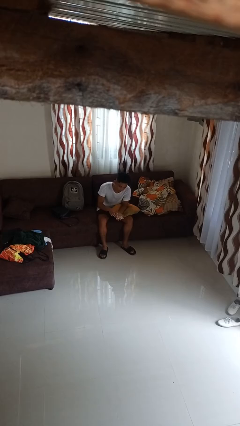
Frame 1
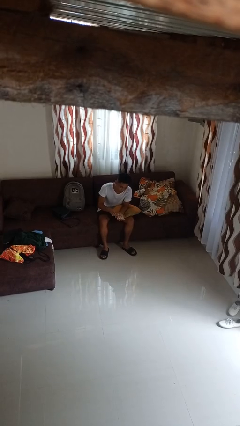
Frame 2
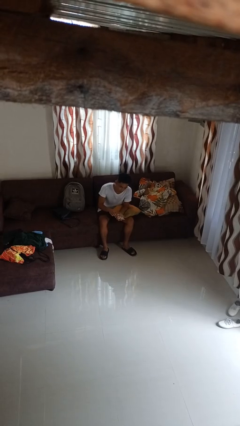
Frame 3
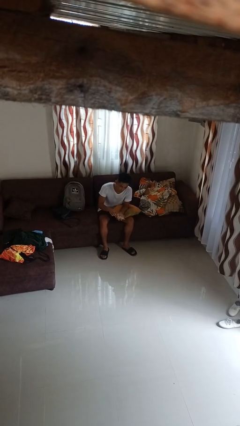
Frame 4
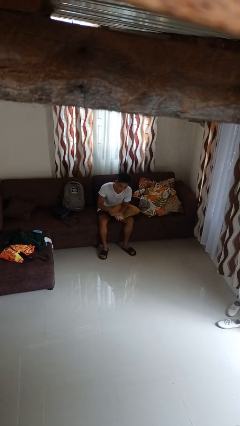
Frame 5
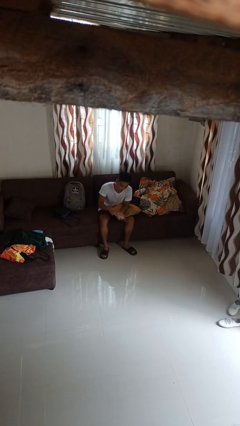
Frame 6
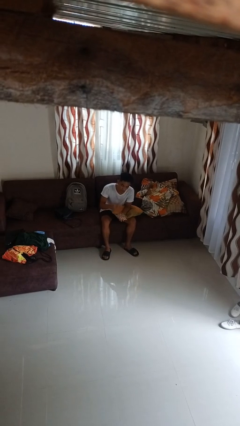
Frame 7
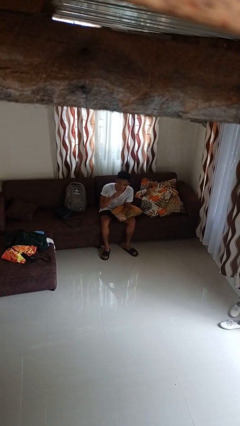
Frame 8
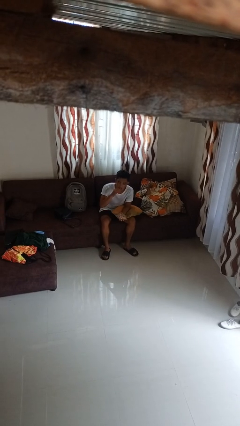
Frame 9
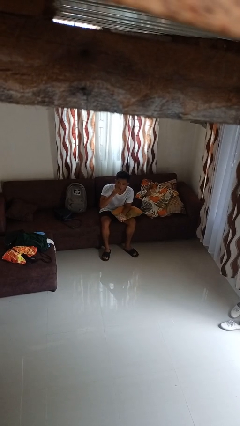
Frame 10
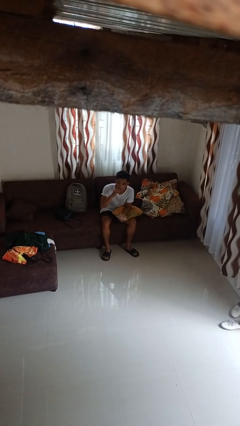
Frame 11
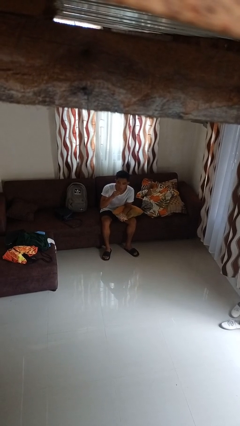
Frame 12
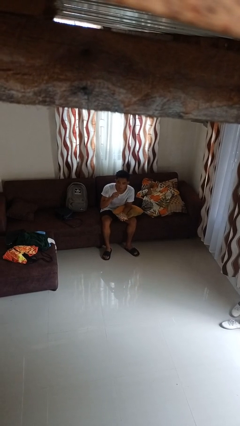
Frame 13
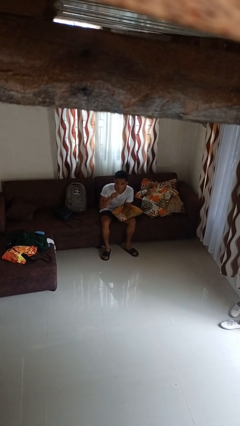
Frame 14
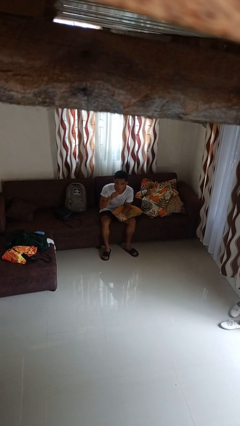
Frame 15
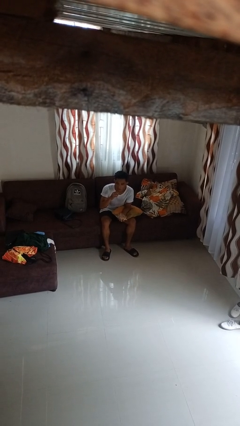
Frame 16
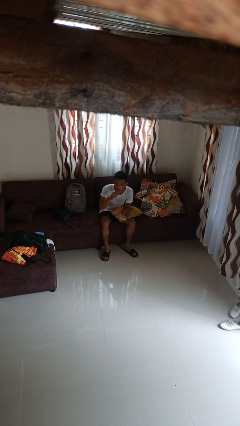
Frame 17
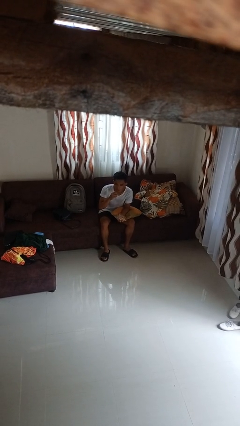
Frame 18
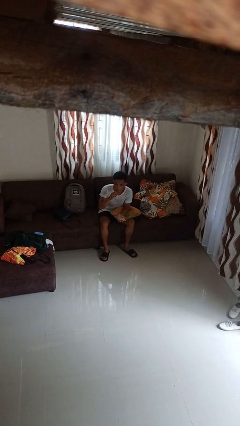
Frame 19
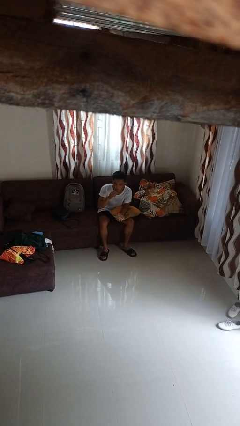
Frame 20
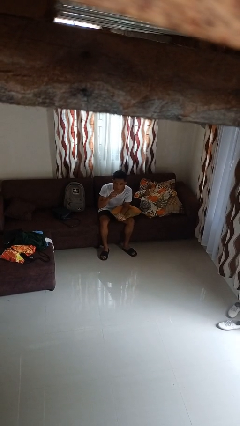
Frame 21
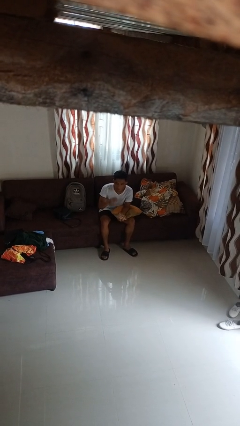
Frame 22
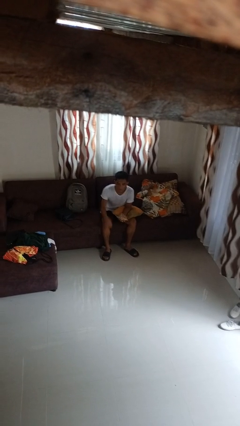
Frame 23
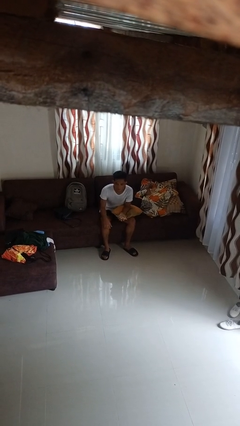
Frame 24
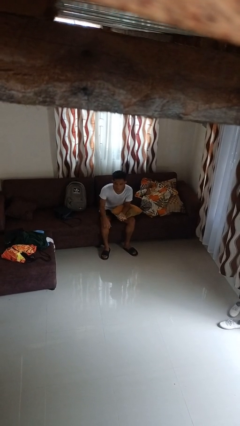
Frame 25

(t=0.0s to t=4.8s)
person eats snack from bag

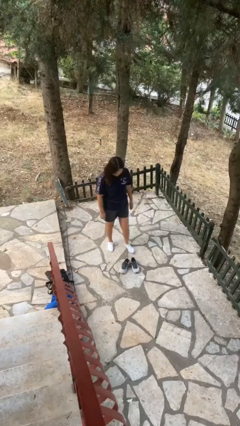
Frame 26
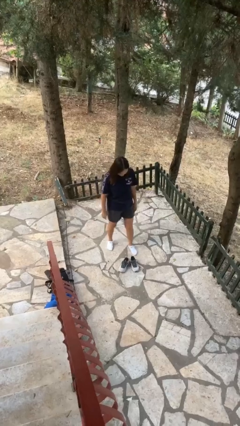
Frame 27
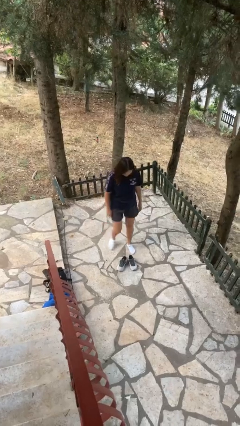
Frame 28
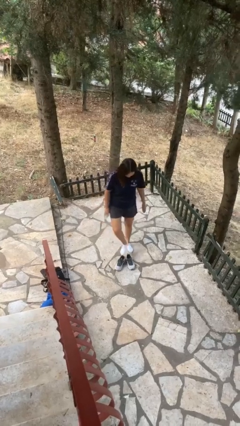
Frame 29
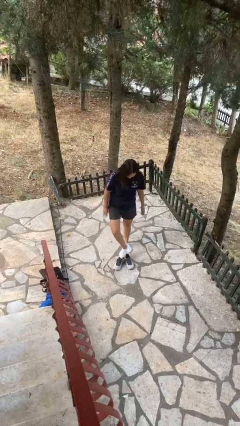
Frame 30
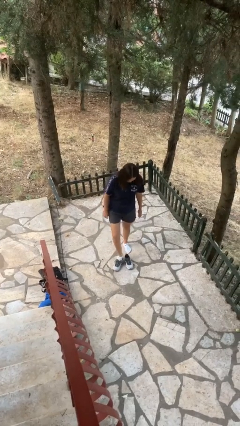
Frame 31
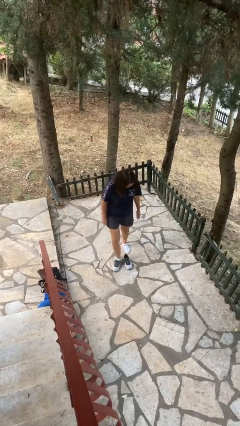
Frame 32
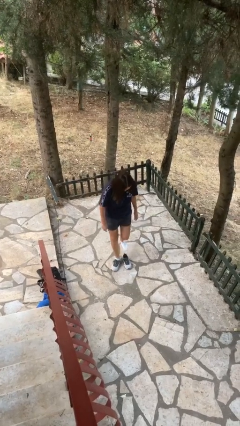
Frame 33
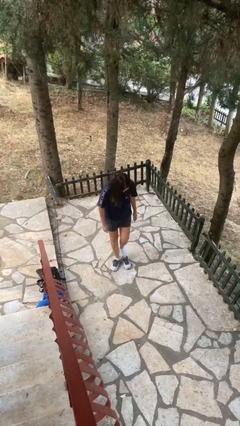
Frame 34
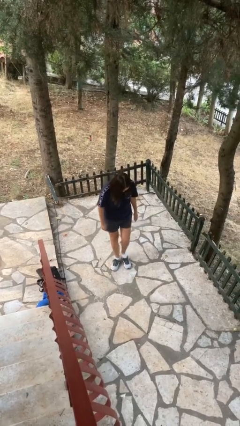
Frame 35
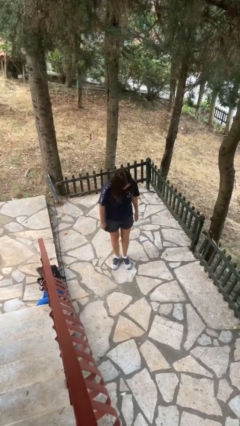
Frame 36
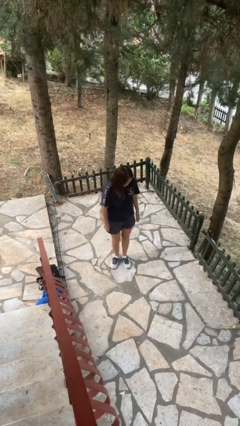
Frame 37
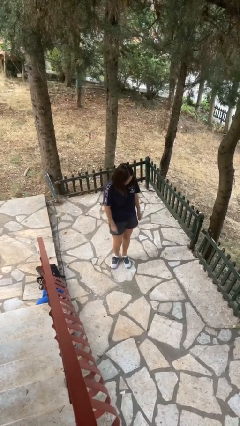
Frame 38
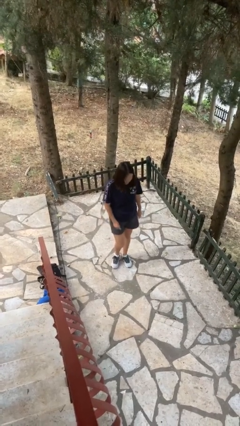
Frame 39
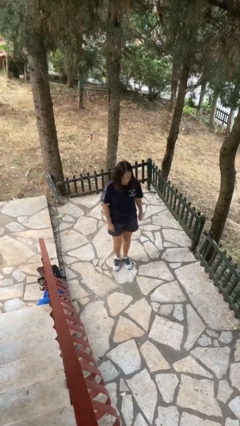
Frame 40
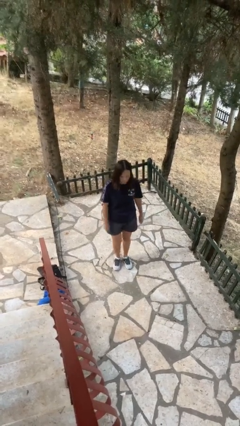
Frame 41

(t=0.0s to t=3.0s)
person puts on shoes

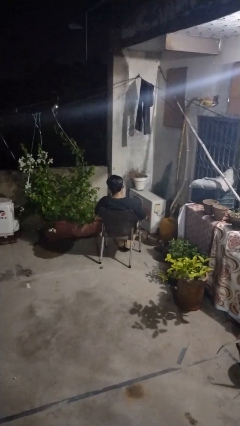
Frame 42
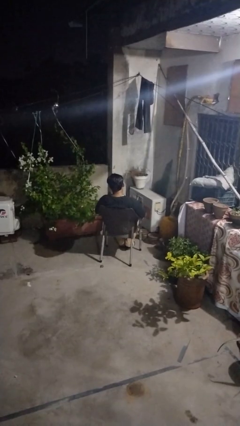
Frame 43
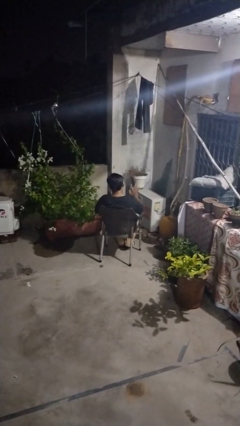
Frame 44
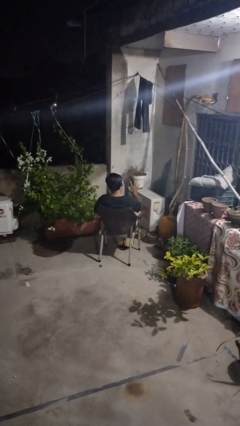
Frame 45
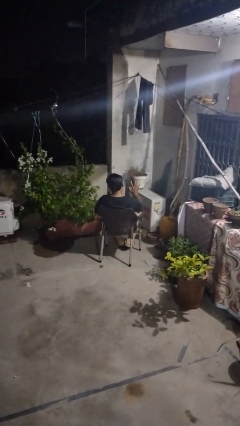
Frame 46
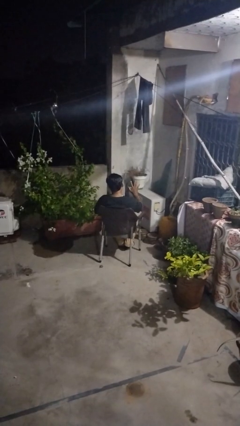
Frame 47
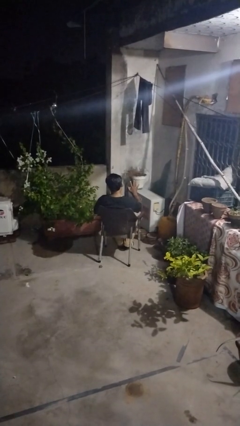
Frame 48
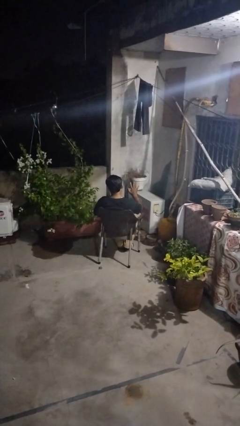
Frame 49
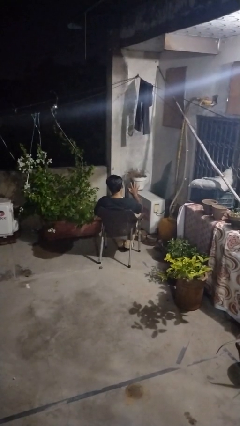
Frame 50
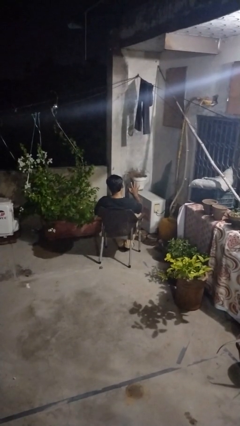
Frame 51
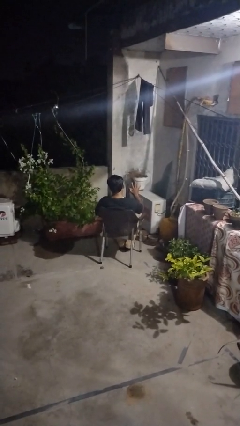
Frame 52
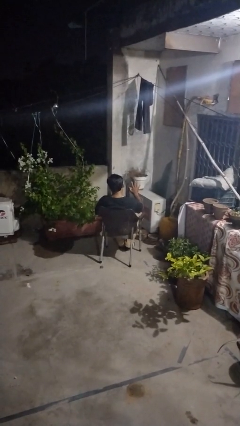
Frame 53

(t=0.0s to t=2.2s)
person gestures number five

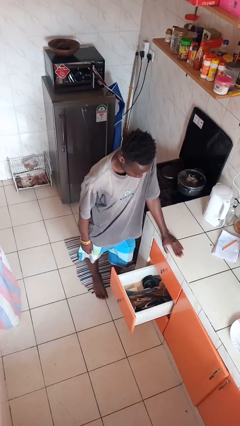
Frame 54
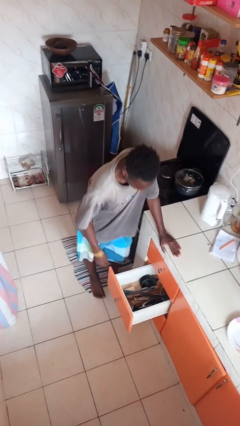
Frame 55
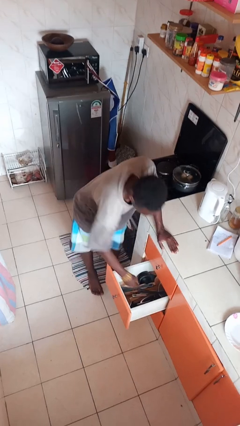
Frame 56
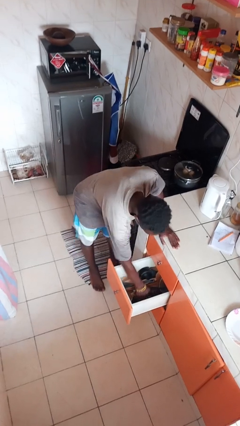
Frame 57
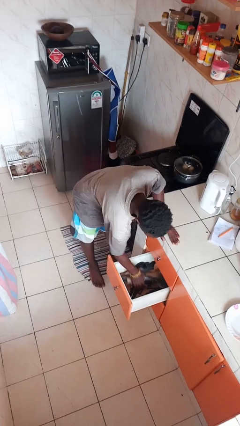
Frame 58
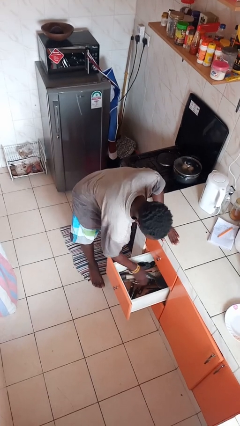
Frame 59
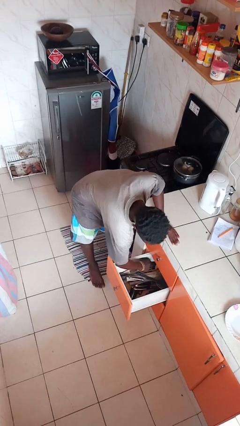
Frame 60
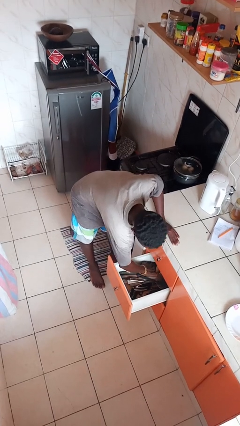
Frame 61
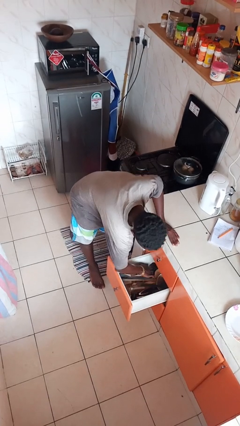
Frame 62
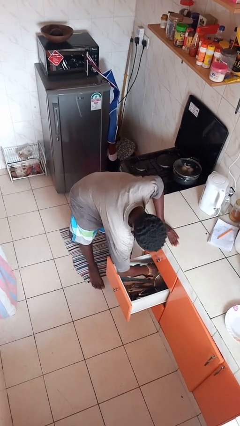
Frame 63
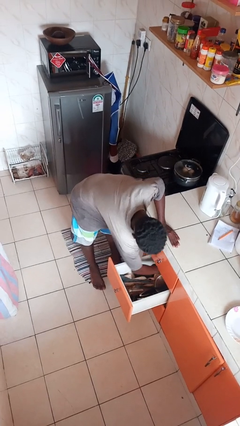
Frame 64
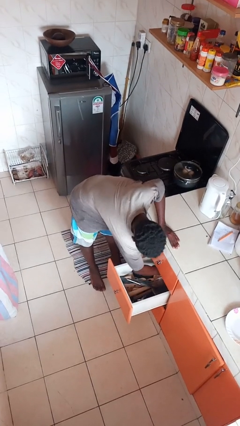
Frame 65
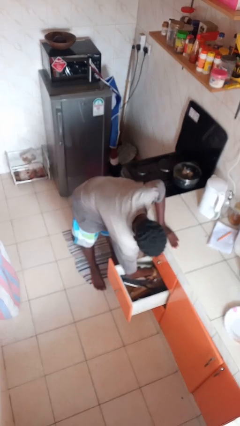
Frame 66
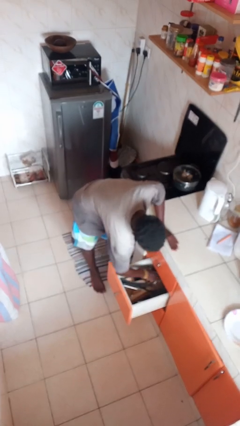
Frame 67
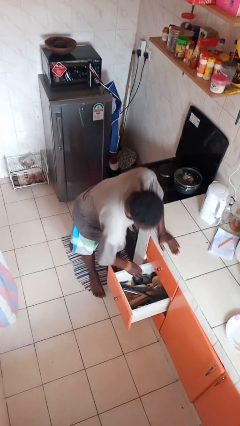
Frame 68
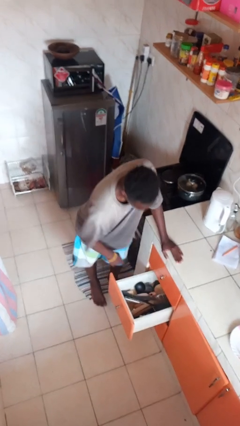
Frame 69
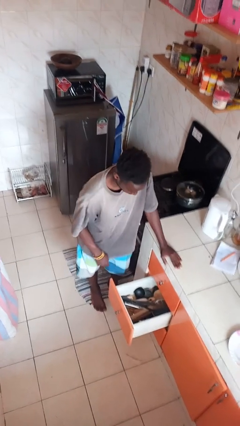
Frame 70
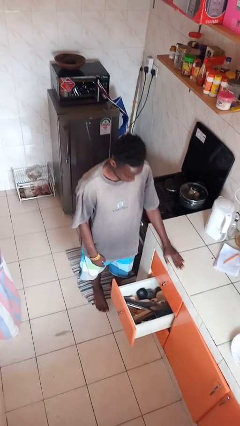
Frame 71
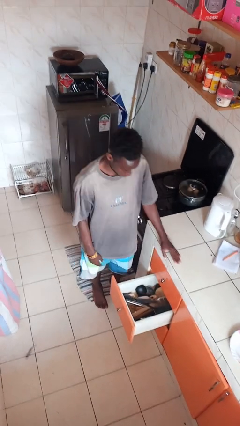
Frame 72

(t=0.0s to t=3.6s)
person searches in kitchen drawer

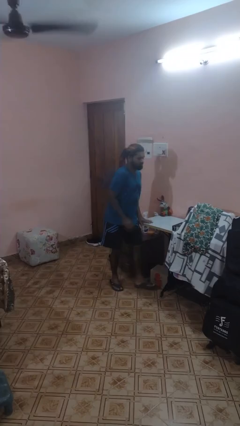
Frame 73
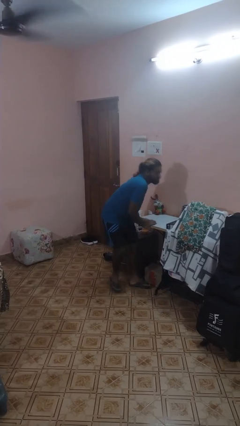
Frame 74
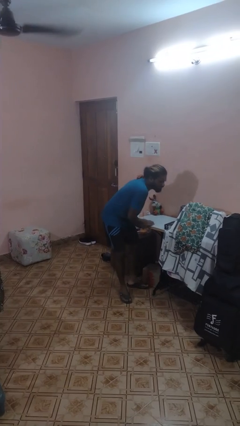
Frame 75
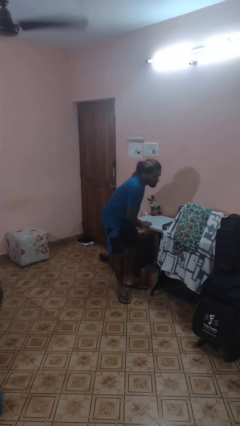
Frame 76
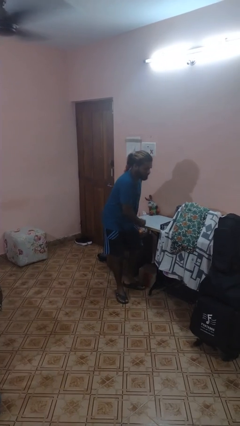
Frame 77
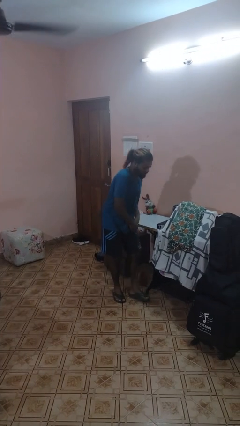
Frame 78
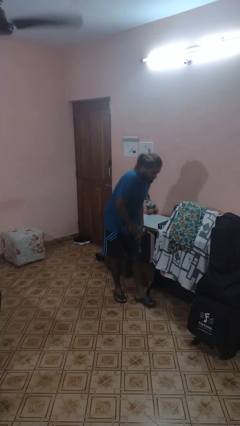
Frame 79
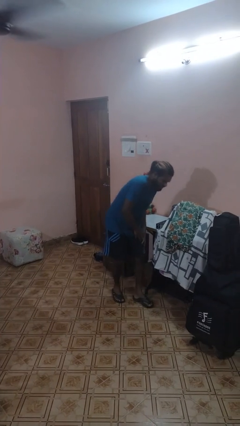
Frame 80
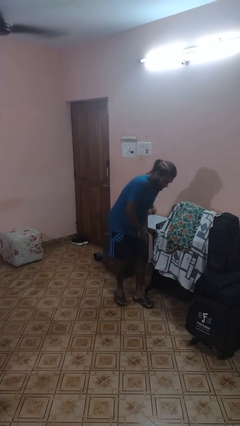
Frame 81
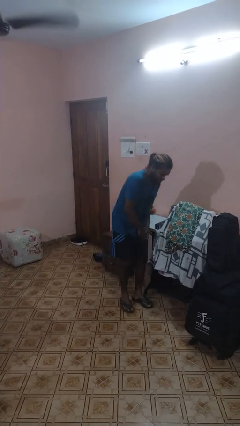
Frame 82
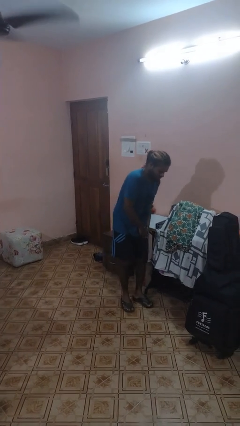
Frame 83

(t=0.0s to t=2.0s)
person bumps into table

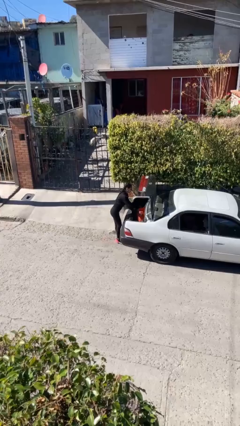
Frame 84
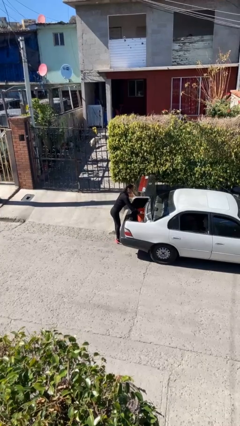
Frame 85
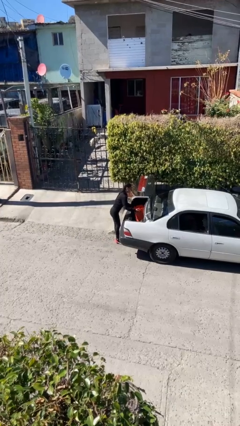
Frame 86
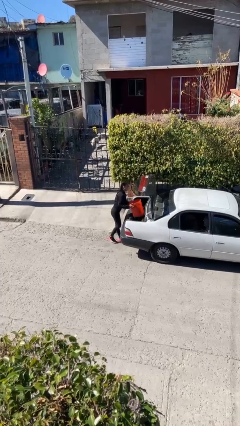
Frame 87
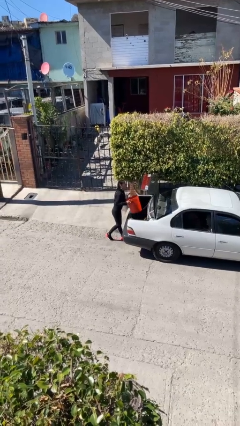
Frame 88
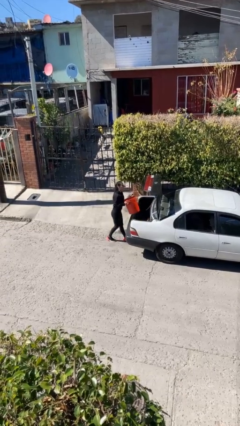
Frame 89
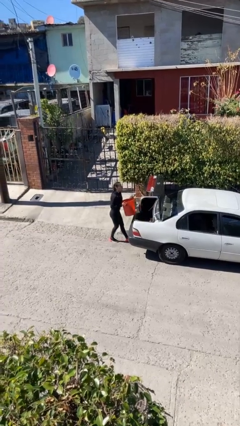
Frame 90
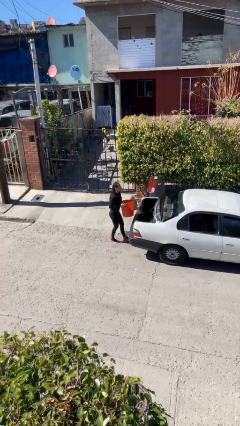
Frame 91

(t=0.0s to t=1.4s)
person unloads car

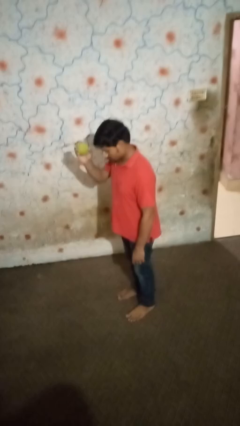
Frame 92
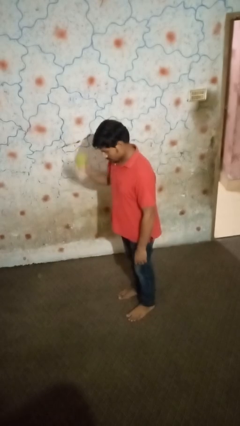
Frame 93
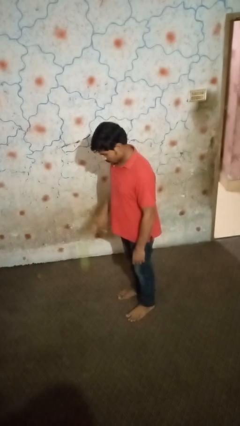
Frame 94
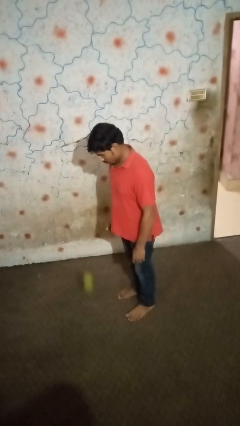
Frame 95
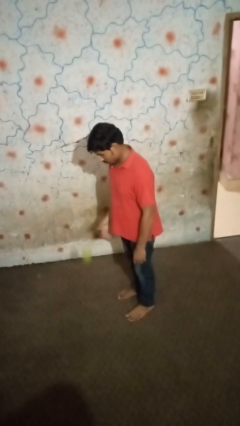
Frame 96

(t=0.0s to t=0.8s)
person bounces ball on floor
